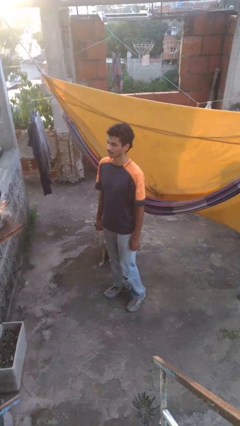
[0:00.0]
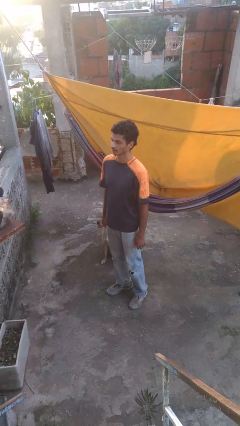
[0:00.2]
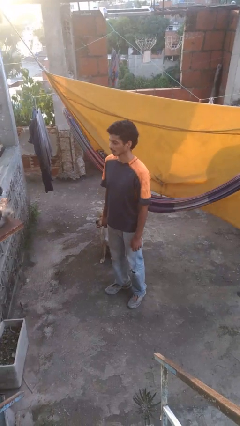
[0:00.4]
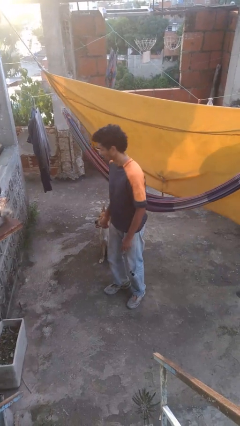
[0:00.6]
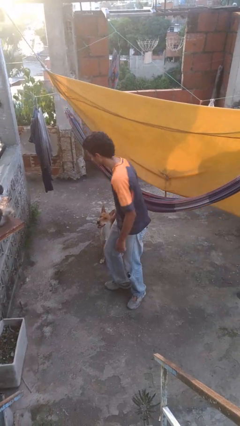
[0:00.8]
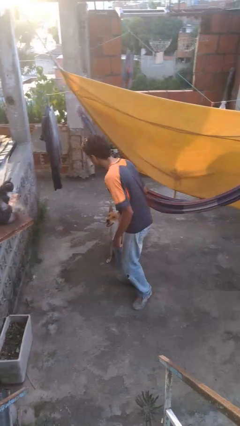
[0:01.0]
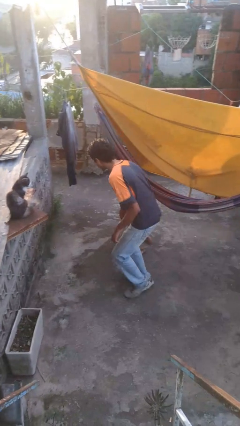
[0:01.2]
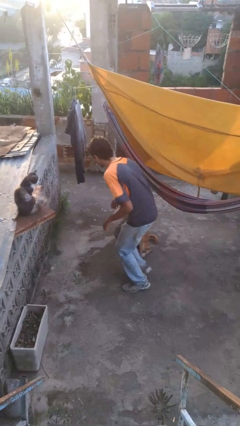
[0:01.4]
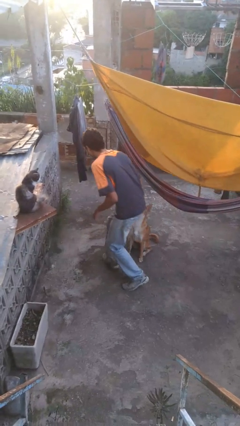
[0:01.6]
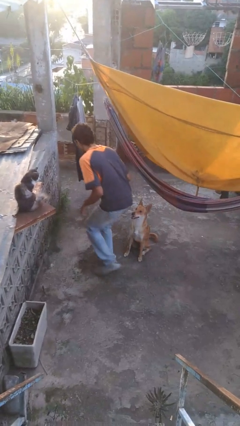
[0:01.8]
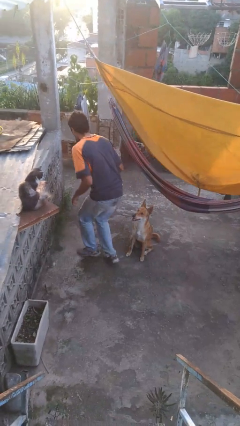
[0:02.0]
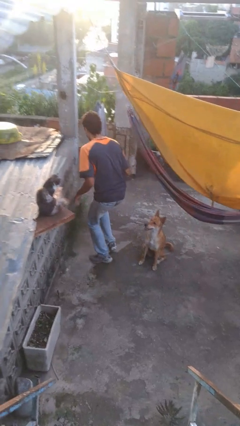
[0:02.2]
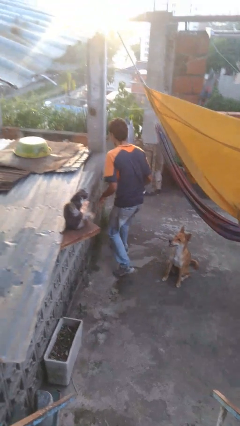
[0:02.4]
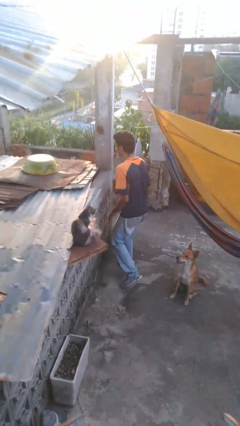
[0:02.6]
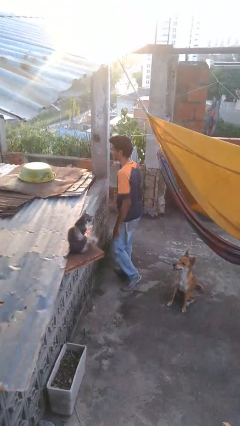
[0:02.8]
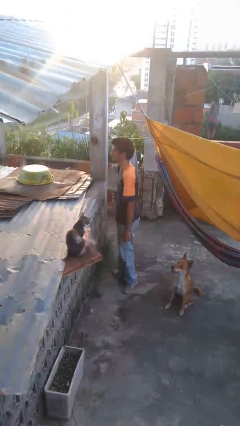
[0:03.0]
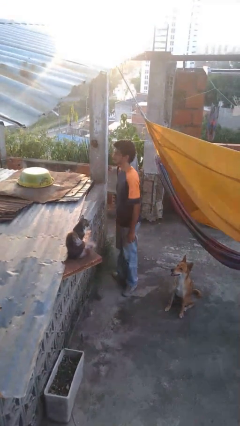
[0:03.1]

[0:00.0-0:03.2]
person walks tiptoe

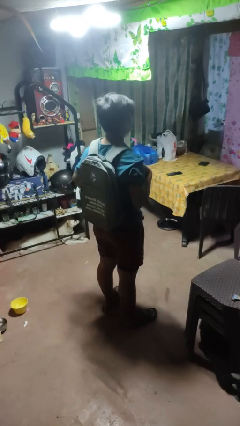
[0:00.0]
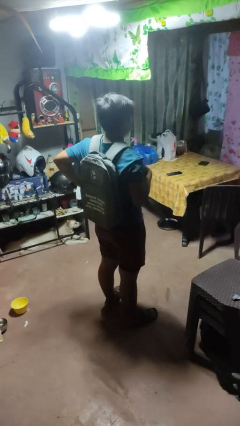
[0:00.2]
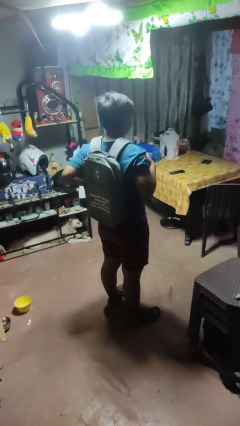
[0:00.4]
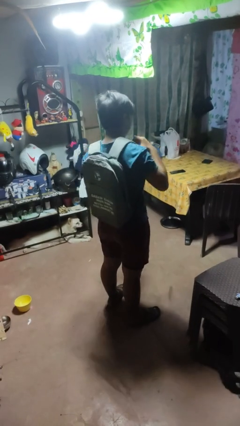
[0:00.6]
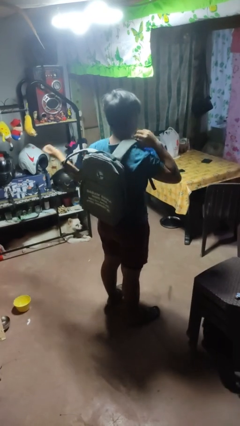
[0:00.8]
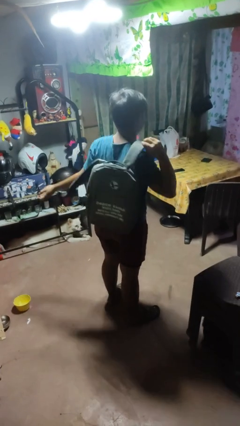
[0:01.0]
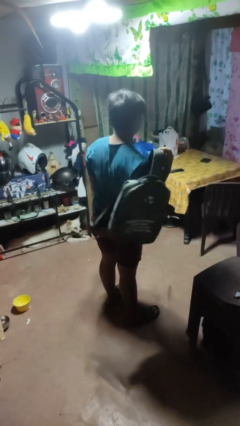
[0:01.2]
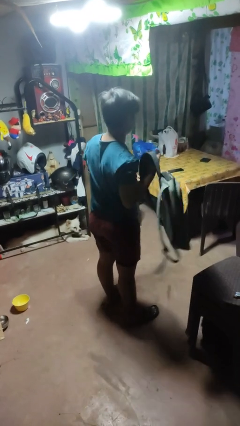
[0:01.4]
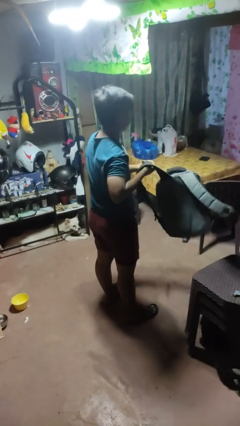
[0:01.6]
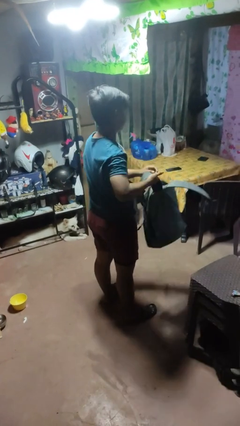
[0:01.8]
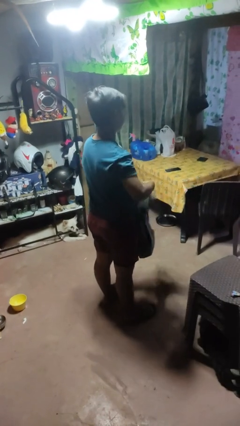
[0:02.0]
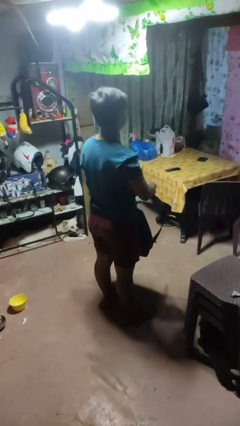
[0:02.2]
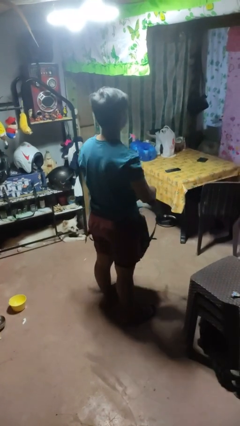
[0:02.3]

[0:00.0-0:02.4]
person takes off backpack

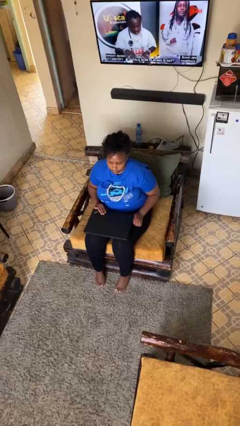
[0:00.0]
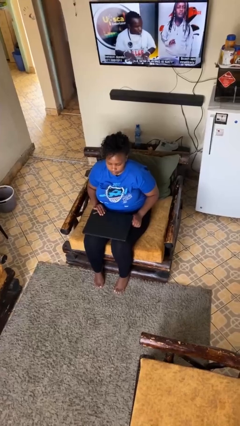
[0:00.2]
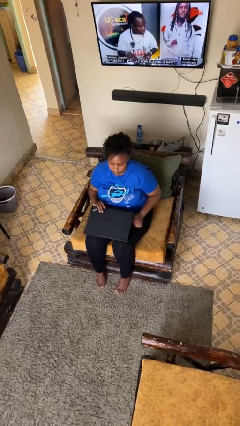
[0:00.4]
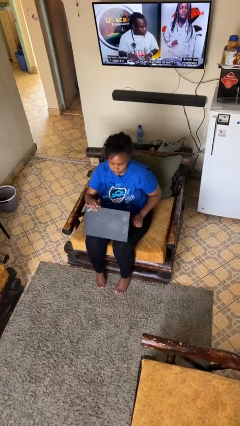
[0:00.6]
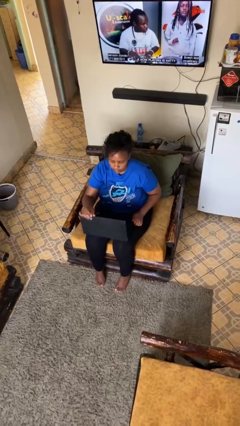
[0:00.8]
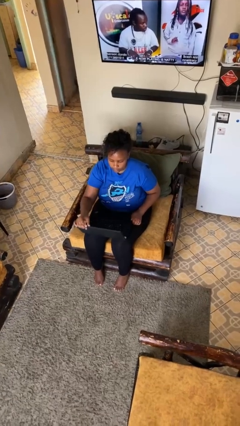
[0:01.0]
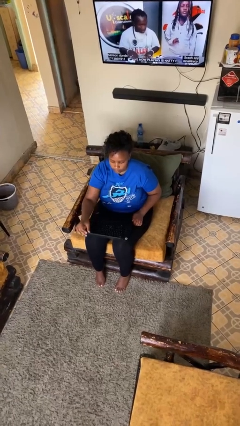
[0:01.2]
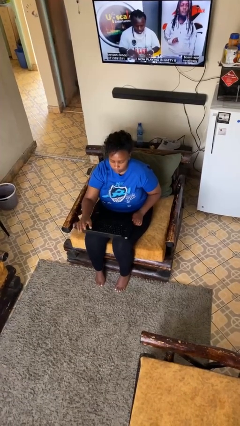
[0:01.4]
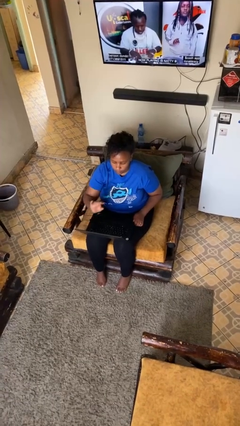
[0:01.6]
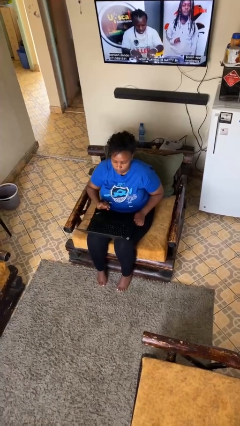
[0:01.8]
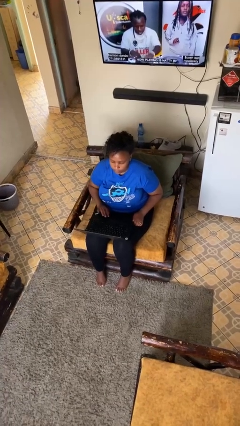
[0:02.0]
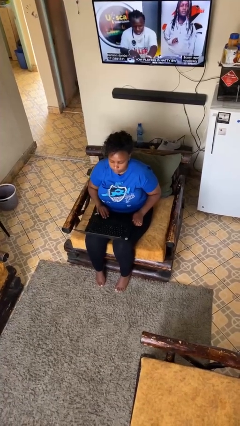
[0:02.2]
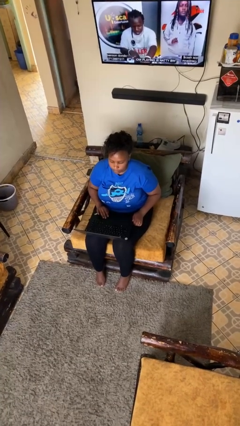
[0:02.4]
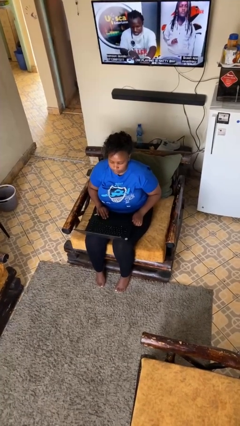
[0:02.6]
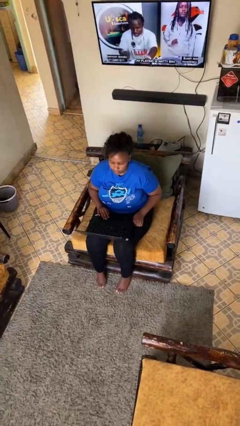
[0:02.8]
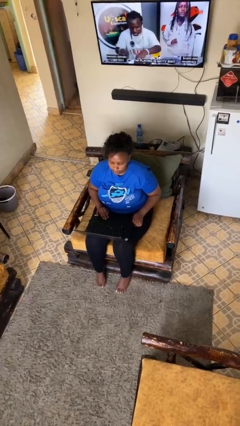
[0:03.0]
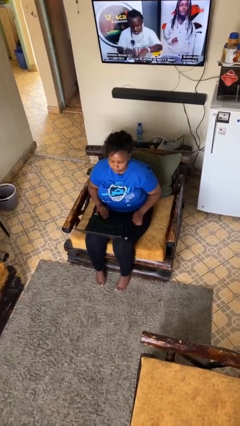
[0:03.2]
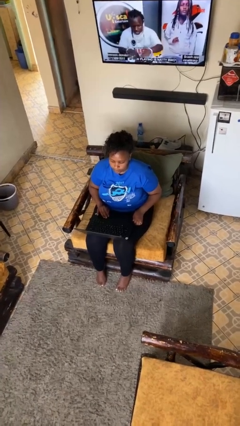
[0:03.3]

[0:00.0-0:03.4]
person opens laptop

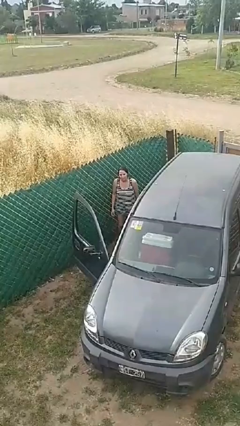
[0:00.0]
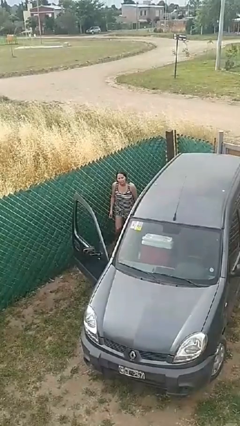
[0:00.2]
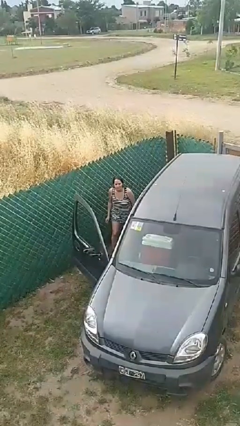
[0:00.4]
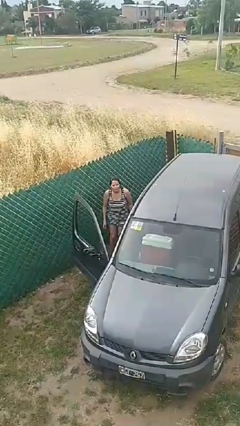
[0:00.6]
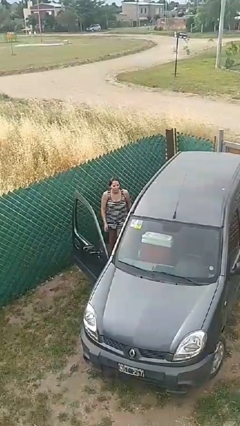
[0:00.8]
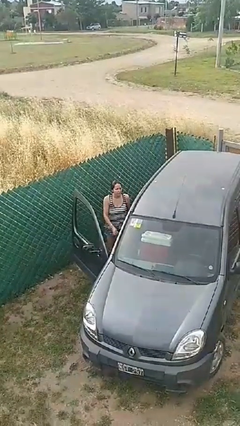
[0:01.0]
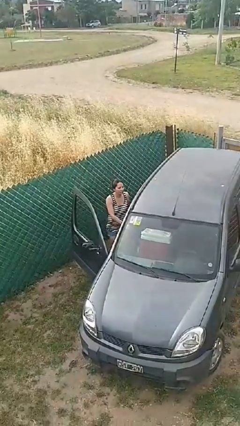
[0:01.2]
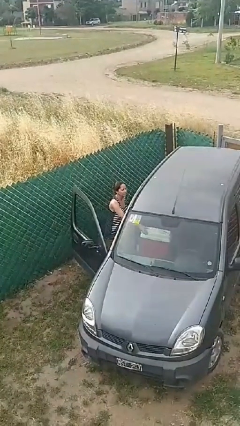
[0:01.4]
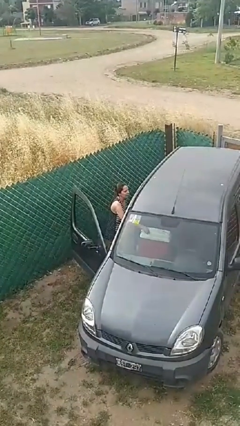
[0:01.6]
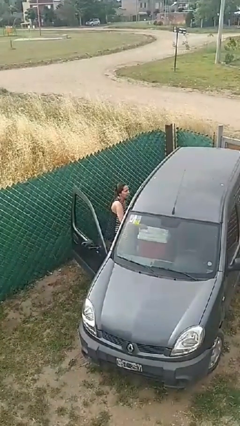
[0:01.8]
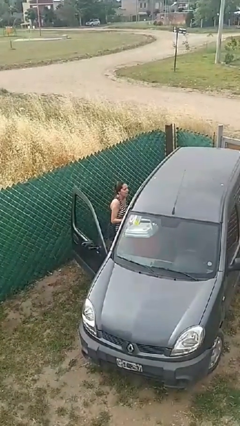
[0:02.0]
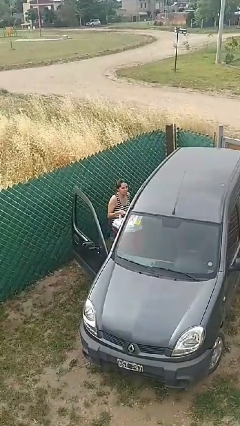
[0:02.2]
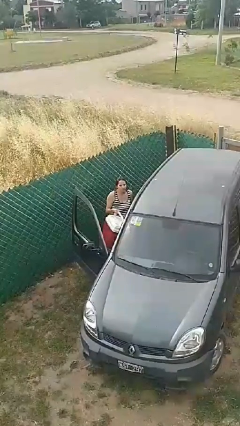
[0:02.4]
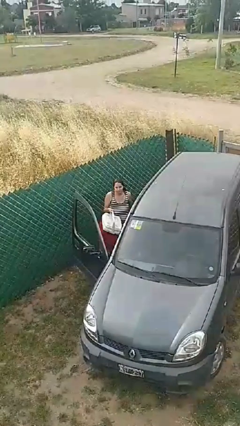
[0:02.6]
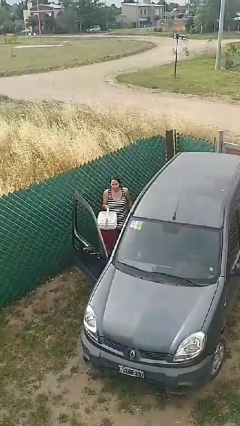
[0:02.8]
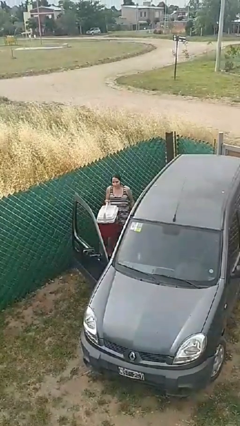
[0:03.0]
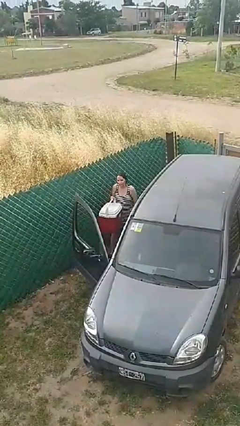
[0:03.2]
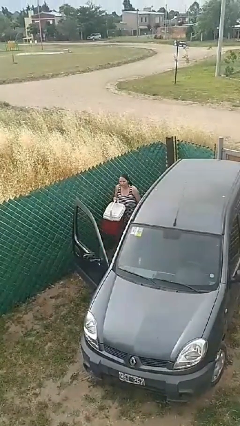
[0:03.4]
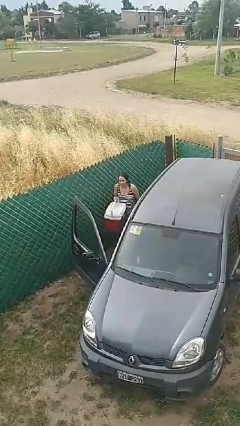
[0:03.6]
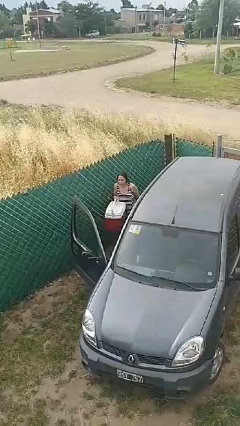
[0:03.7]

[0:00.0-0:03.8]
person unloads car

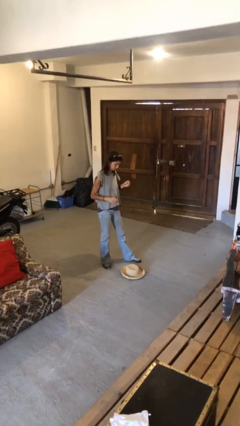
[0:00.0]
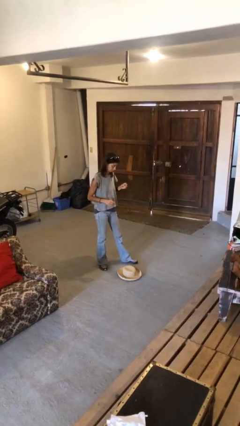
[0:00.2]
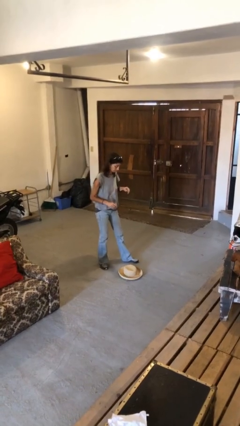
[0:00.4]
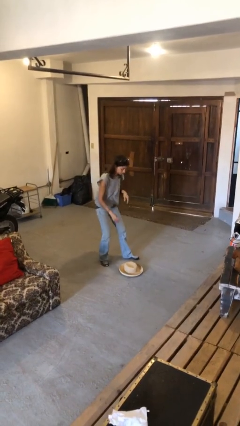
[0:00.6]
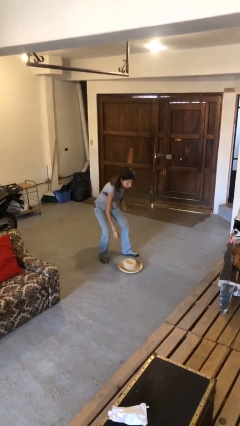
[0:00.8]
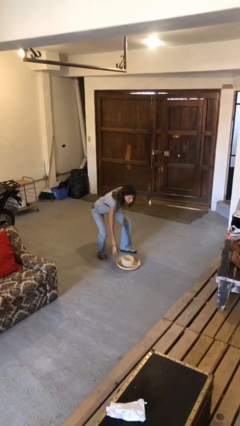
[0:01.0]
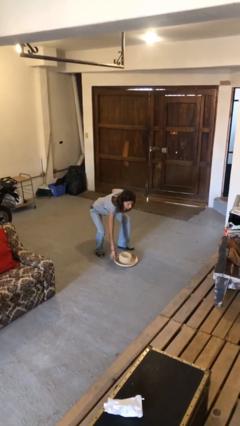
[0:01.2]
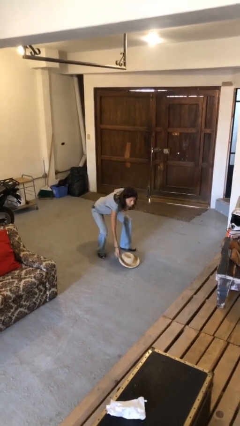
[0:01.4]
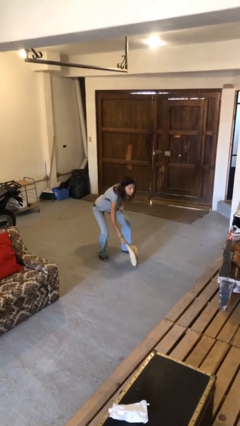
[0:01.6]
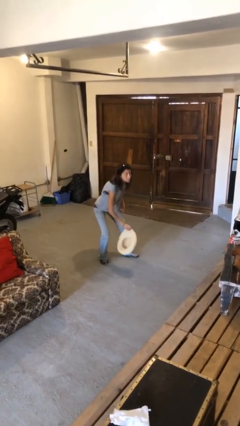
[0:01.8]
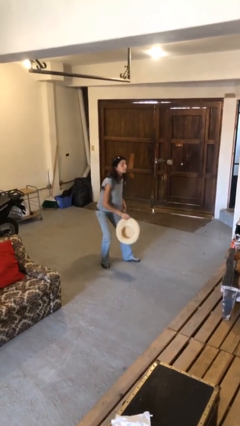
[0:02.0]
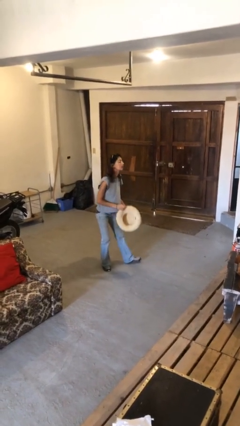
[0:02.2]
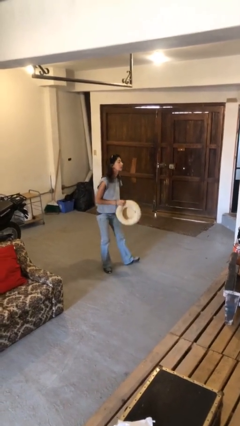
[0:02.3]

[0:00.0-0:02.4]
person picks up object from floor

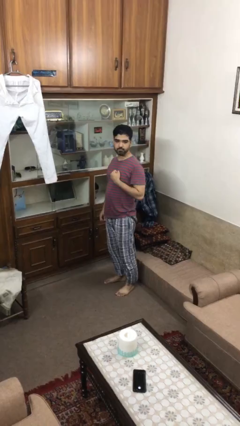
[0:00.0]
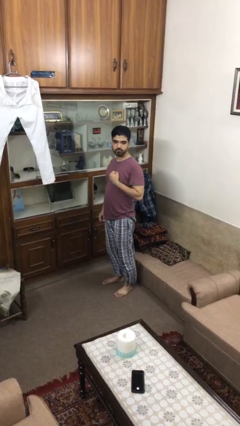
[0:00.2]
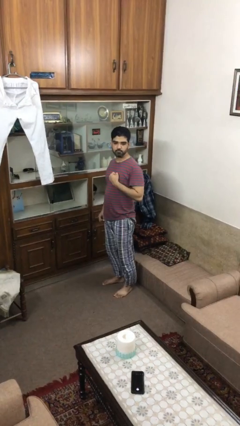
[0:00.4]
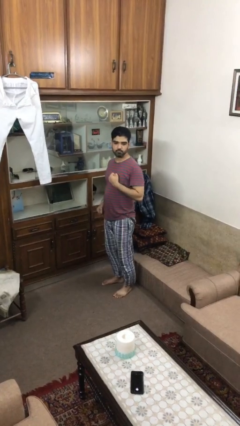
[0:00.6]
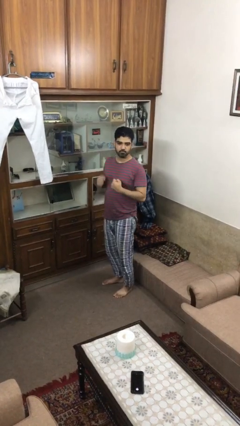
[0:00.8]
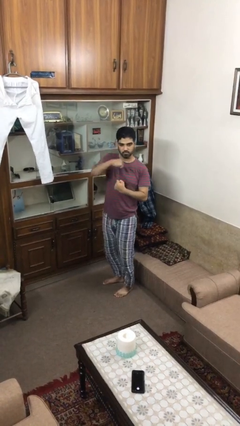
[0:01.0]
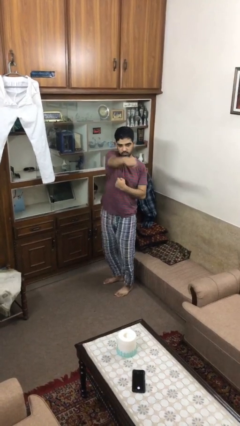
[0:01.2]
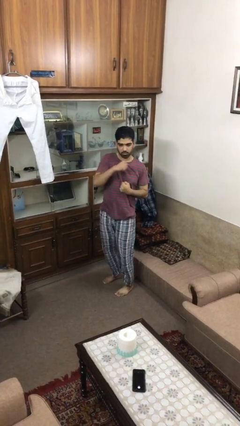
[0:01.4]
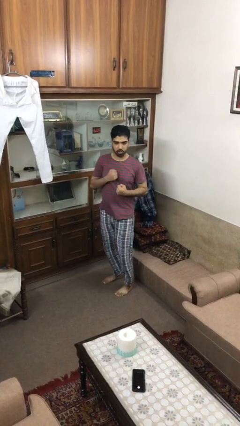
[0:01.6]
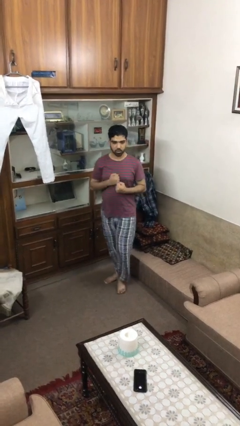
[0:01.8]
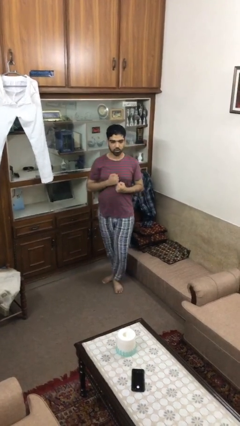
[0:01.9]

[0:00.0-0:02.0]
person karate chop

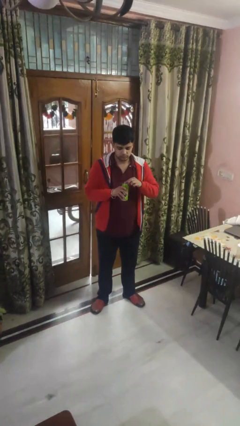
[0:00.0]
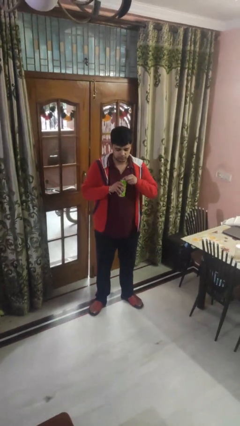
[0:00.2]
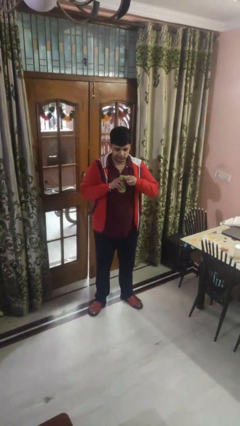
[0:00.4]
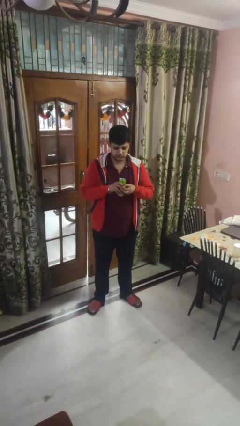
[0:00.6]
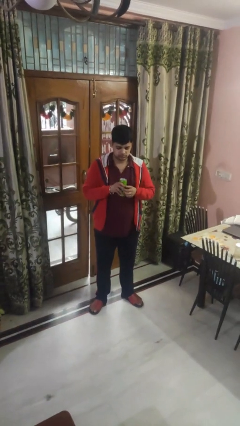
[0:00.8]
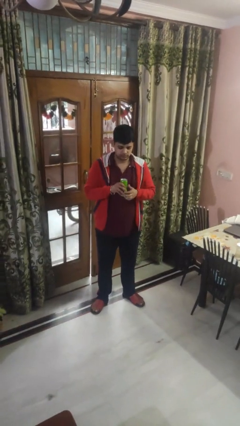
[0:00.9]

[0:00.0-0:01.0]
person opens beverage can
